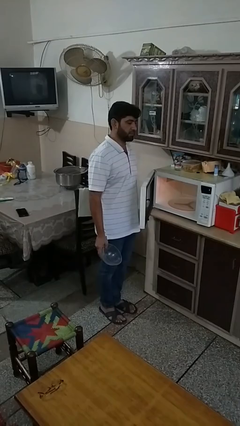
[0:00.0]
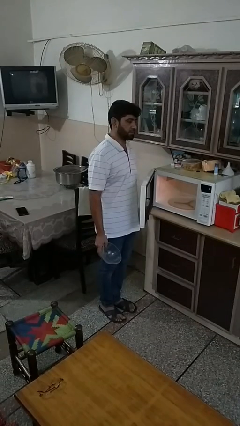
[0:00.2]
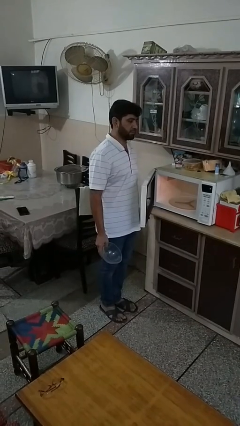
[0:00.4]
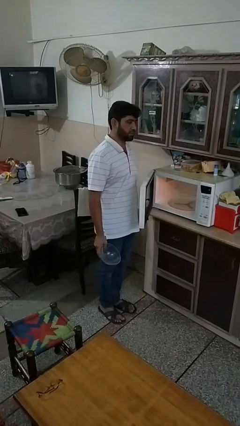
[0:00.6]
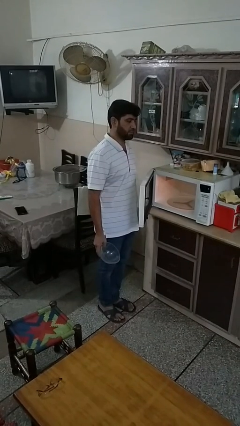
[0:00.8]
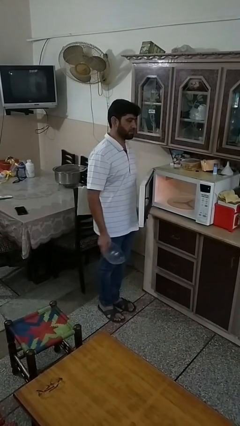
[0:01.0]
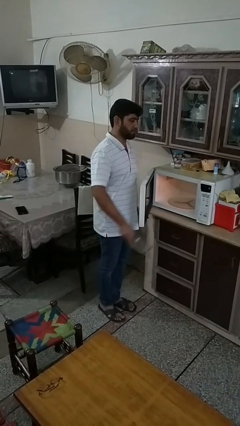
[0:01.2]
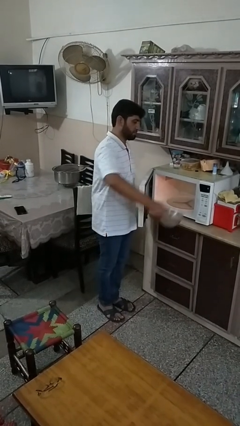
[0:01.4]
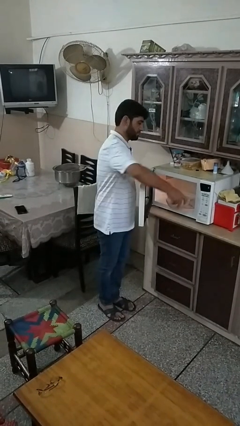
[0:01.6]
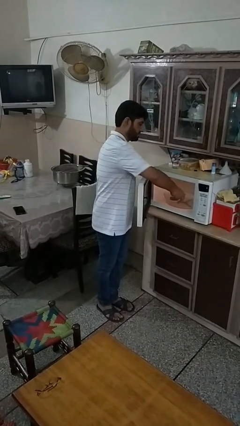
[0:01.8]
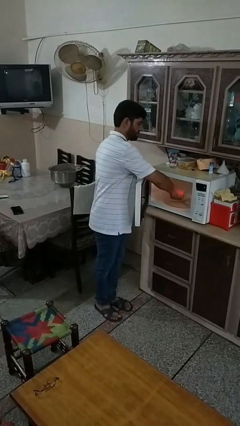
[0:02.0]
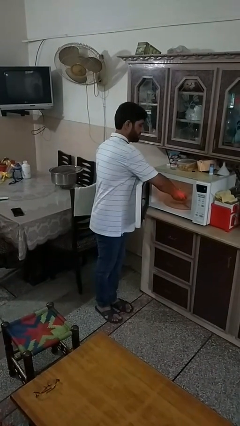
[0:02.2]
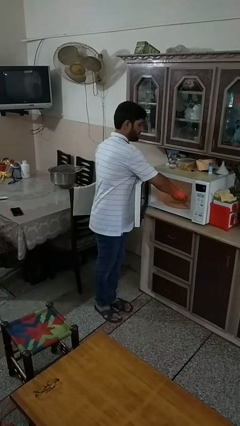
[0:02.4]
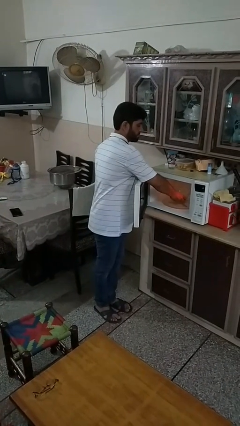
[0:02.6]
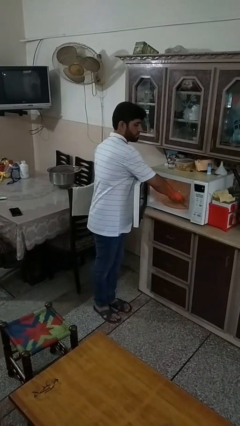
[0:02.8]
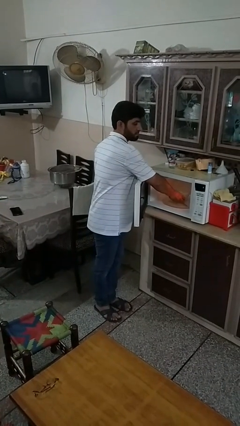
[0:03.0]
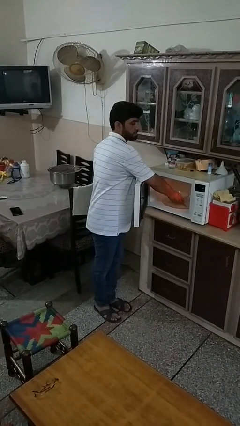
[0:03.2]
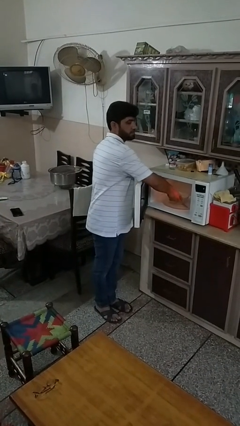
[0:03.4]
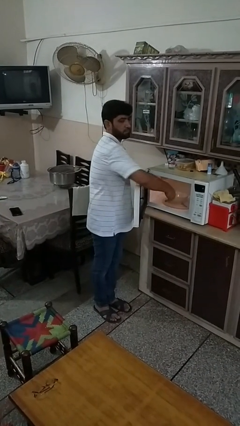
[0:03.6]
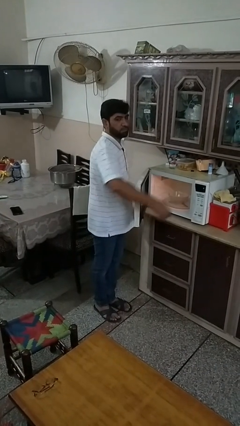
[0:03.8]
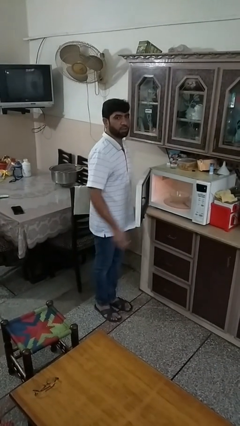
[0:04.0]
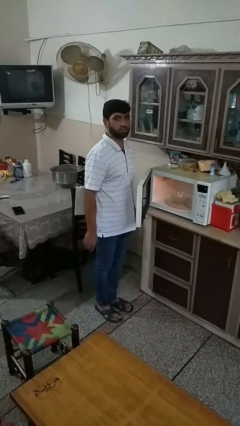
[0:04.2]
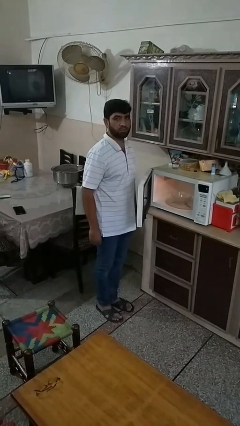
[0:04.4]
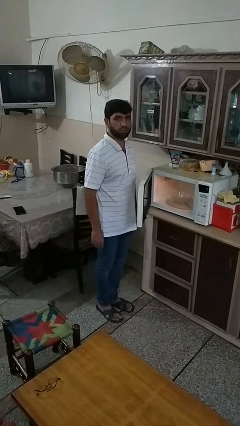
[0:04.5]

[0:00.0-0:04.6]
person puts object into microwave

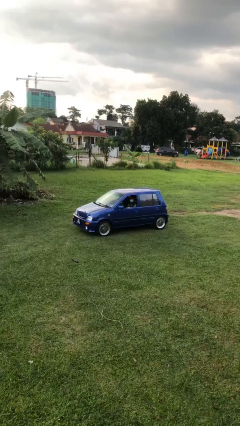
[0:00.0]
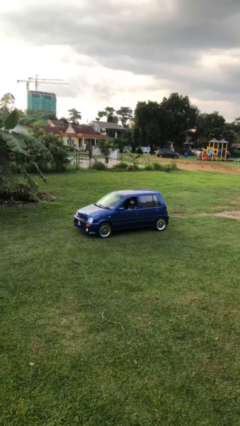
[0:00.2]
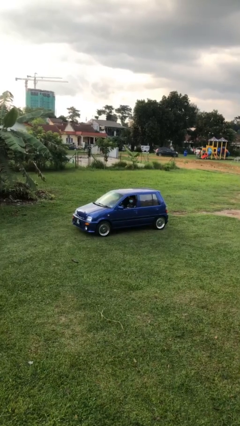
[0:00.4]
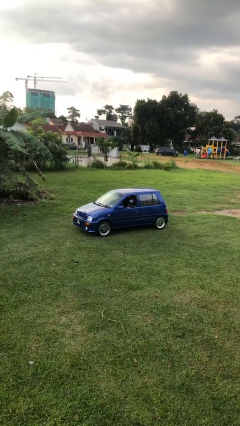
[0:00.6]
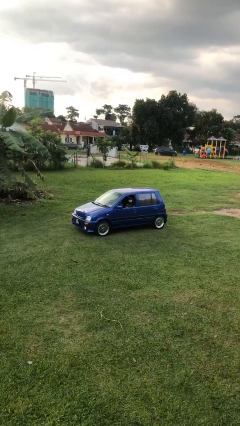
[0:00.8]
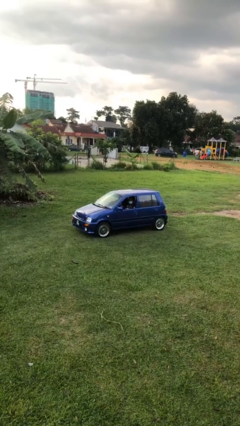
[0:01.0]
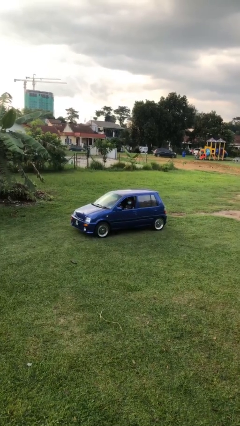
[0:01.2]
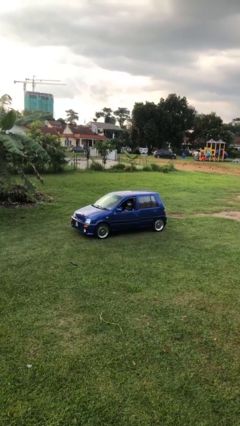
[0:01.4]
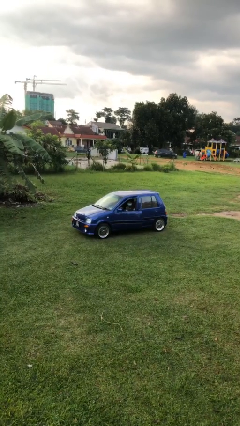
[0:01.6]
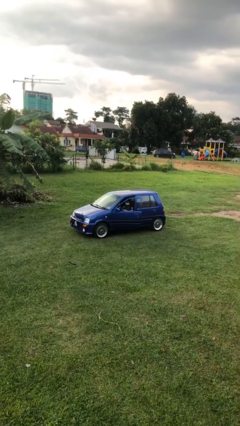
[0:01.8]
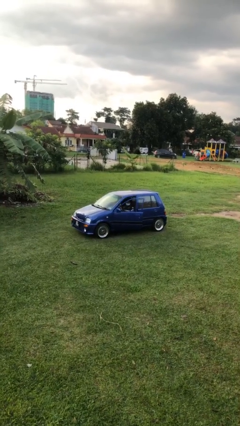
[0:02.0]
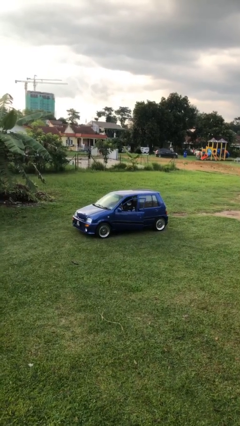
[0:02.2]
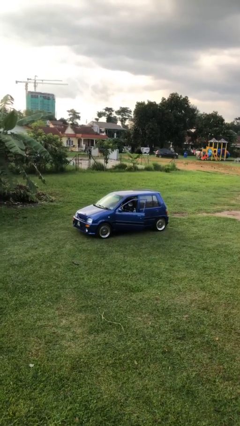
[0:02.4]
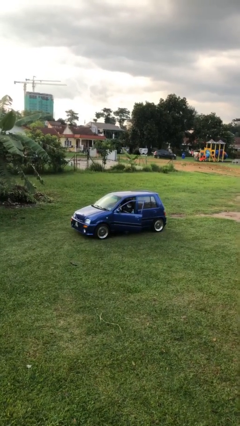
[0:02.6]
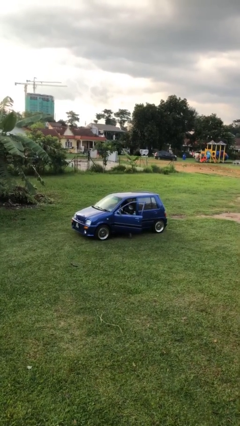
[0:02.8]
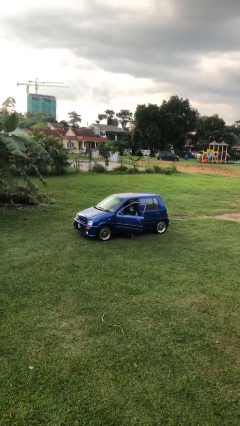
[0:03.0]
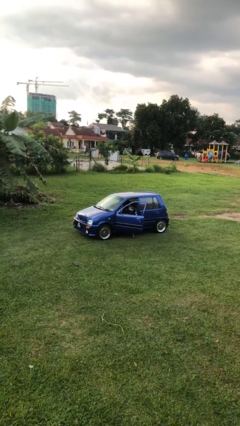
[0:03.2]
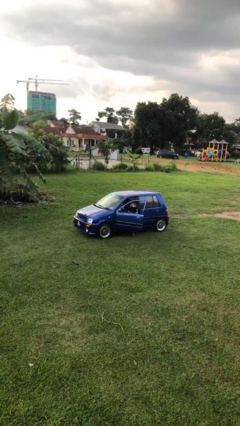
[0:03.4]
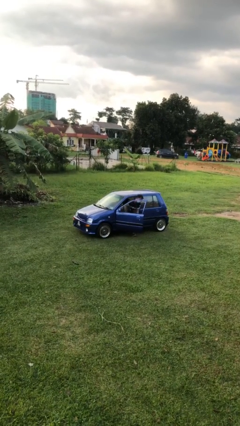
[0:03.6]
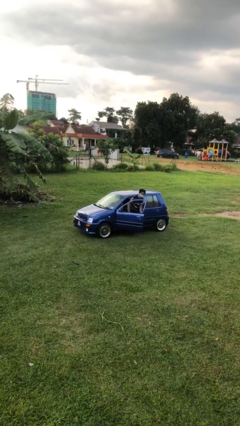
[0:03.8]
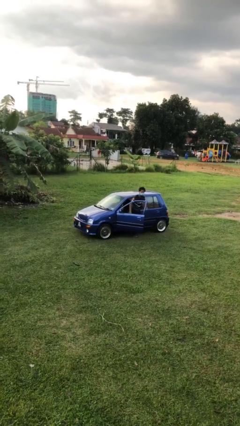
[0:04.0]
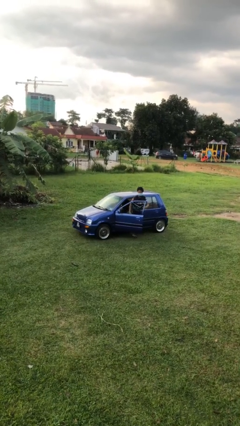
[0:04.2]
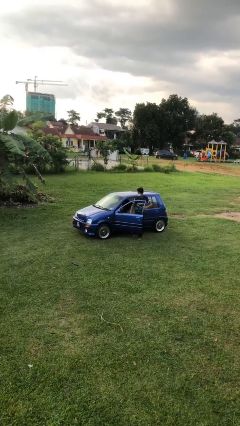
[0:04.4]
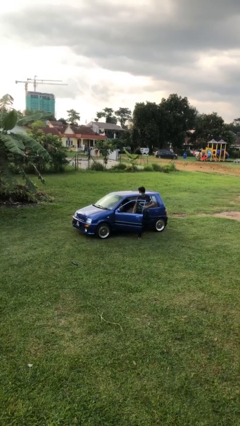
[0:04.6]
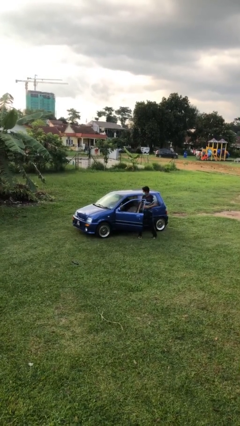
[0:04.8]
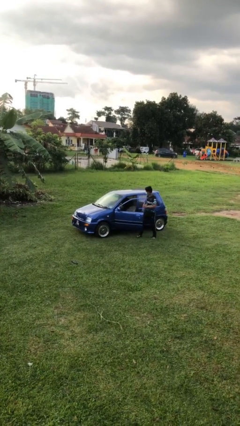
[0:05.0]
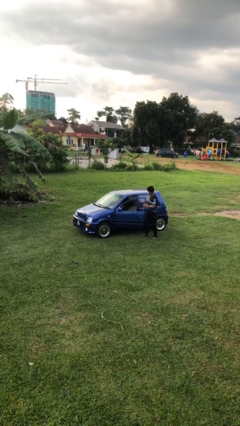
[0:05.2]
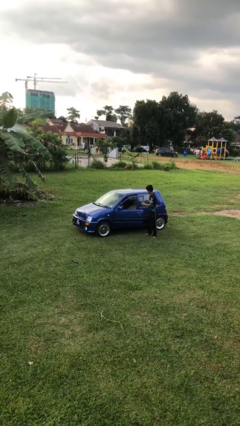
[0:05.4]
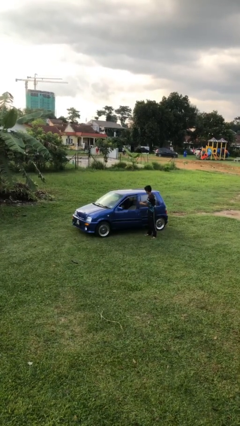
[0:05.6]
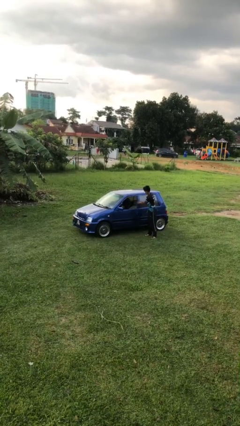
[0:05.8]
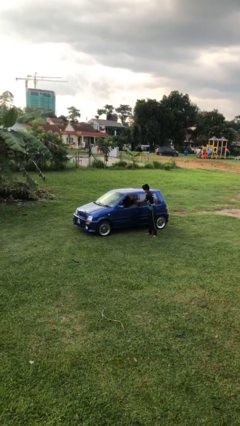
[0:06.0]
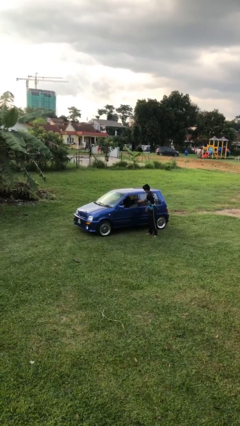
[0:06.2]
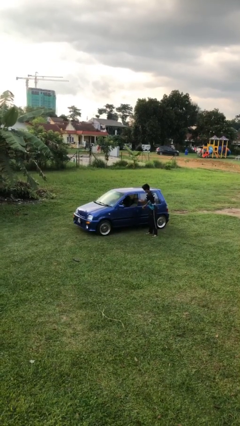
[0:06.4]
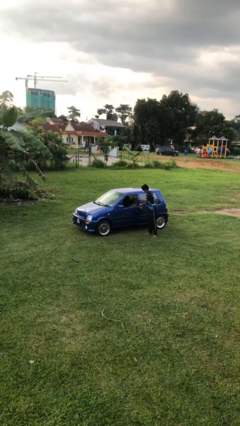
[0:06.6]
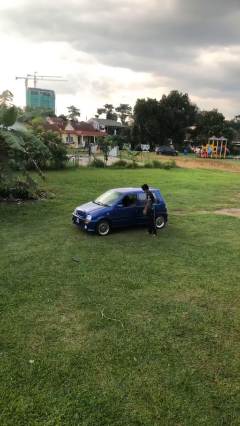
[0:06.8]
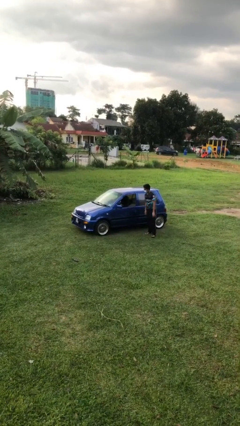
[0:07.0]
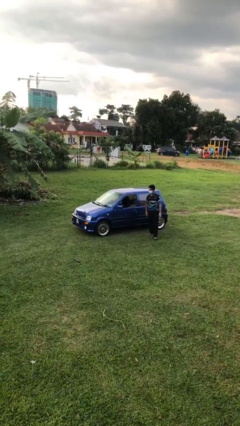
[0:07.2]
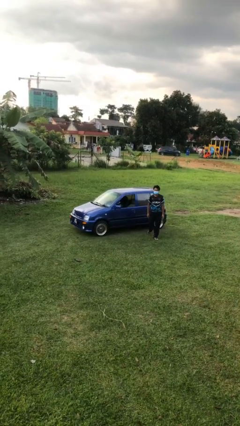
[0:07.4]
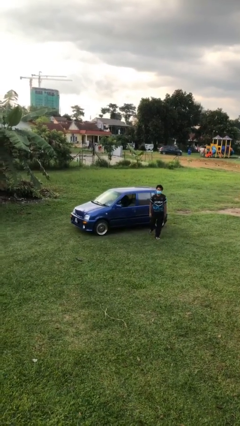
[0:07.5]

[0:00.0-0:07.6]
car drops off person

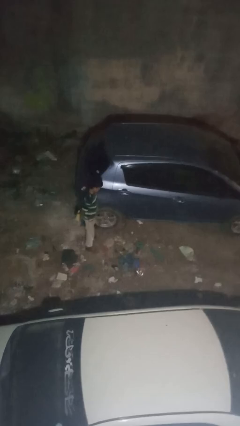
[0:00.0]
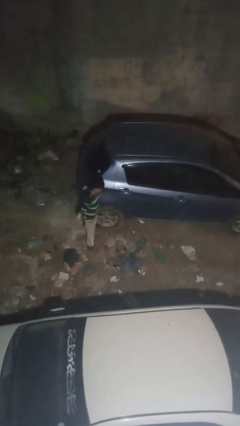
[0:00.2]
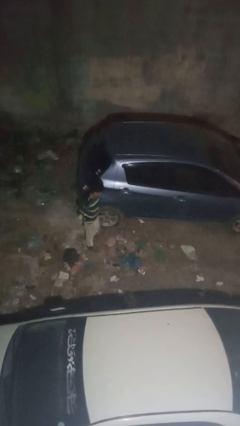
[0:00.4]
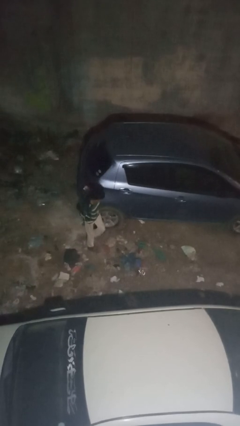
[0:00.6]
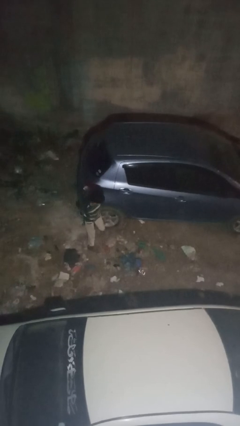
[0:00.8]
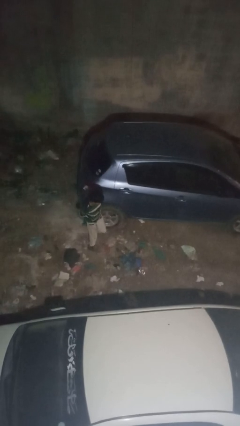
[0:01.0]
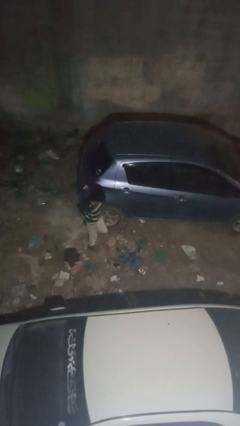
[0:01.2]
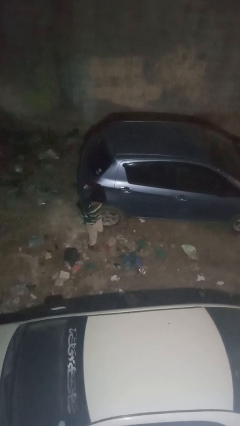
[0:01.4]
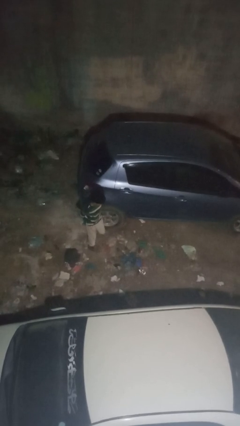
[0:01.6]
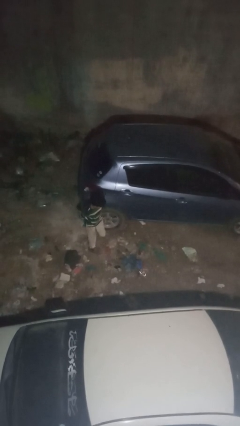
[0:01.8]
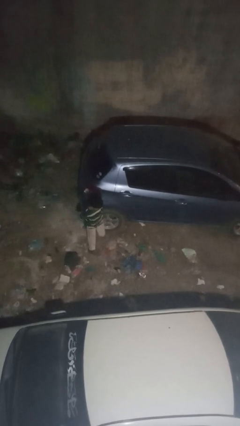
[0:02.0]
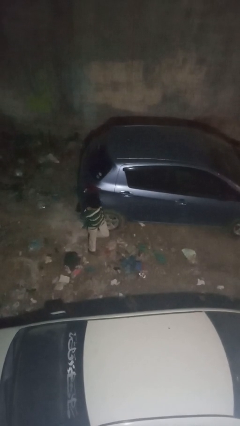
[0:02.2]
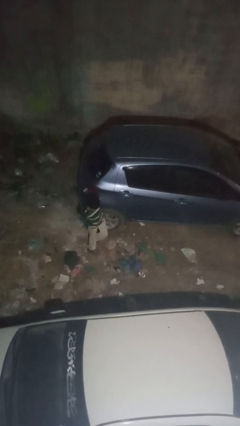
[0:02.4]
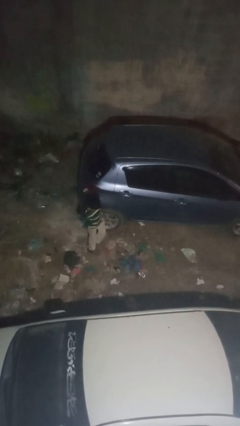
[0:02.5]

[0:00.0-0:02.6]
person kicks car tires

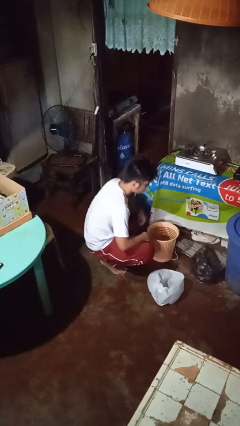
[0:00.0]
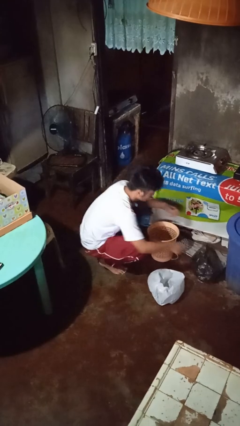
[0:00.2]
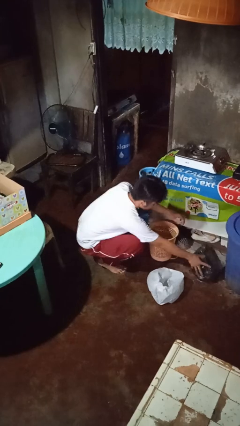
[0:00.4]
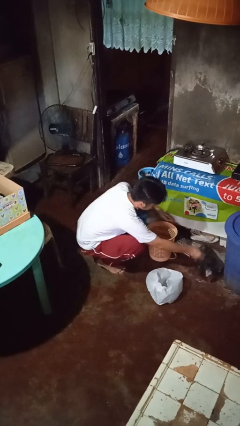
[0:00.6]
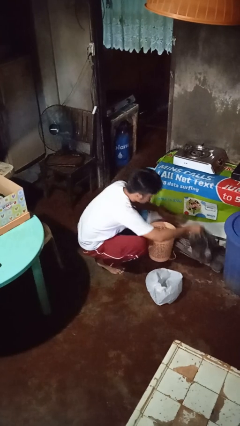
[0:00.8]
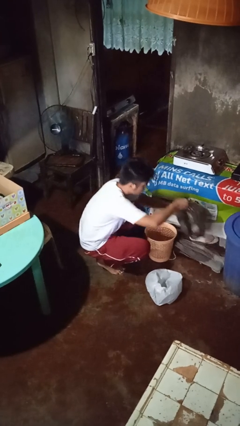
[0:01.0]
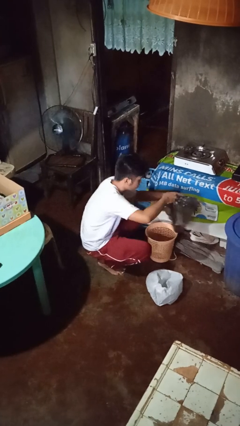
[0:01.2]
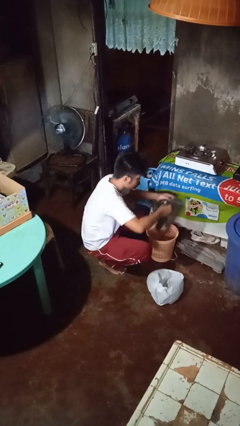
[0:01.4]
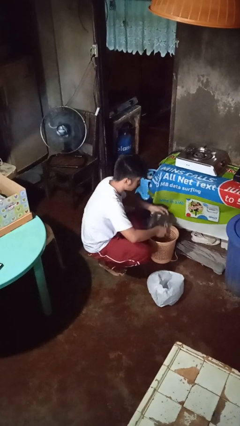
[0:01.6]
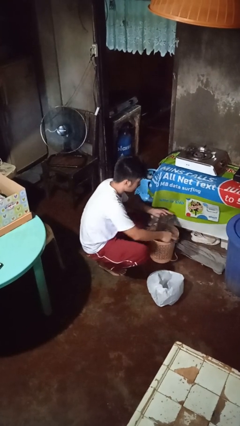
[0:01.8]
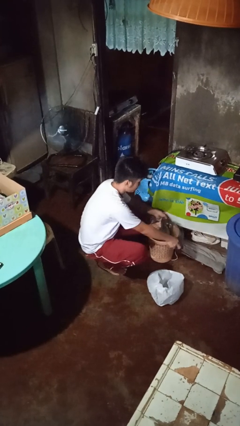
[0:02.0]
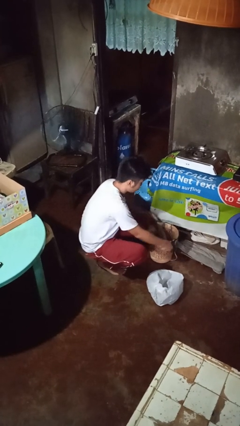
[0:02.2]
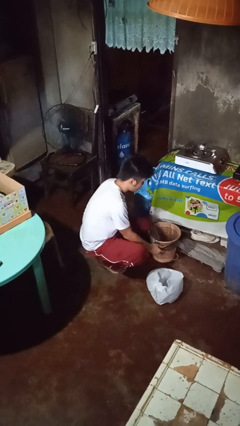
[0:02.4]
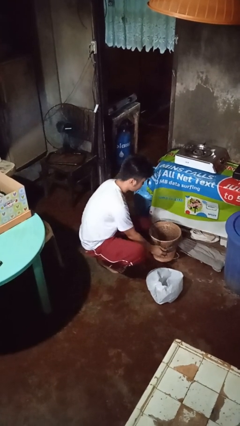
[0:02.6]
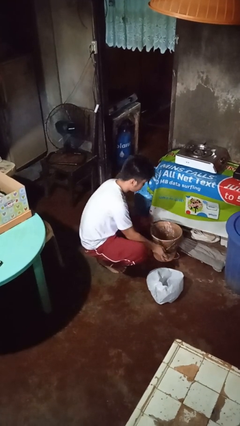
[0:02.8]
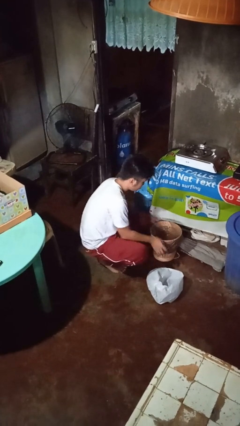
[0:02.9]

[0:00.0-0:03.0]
person inserts trashbag into trashcan

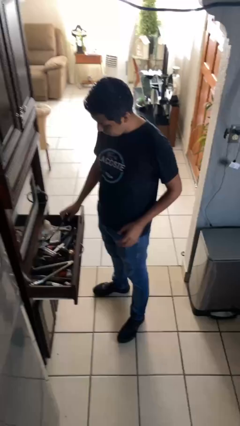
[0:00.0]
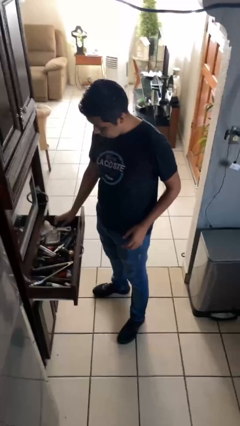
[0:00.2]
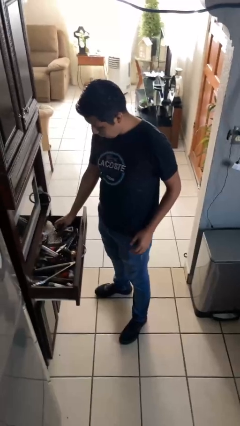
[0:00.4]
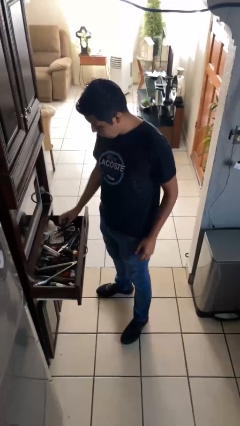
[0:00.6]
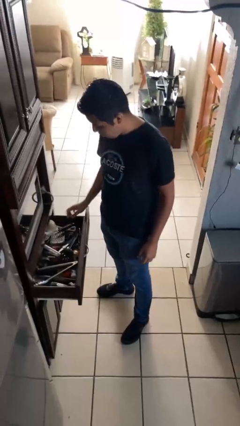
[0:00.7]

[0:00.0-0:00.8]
person puts object into kitchen drawer
